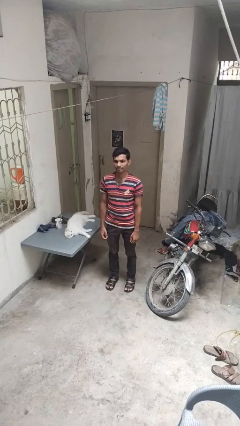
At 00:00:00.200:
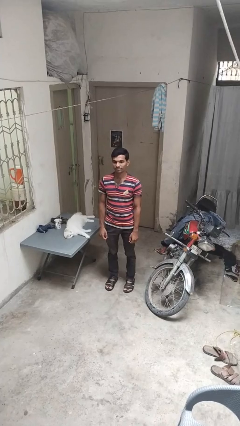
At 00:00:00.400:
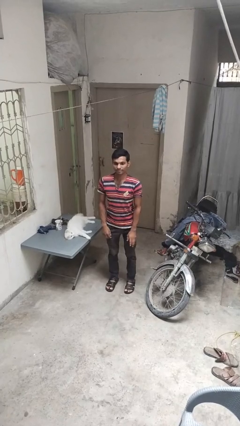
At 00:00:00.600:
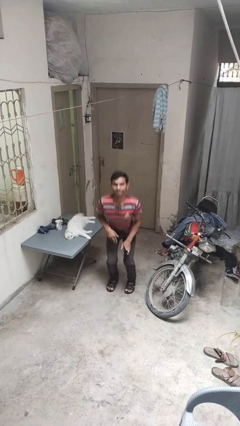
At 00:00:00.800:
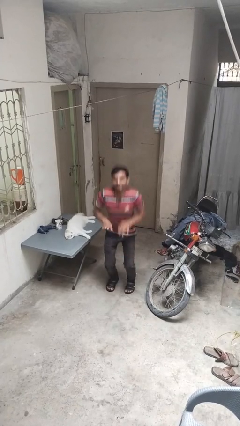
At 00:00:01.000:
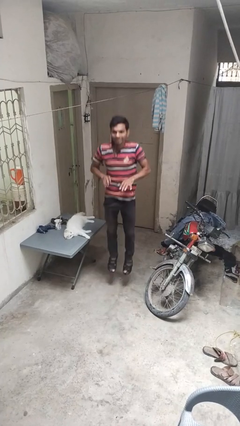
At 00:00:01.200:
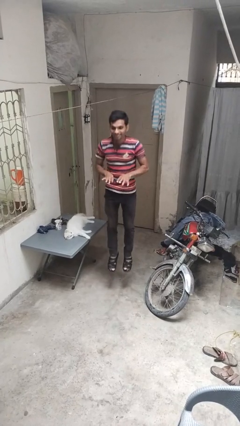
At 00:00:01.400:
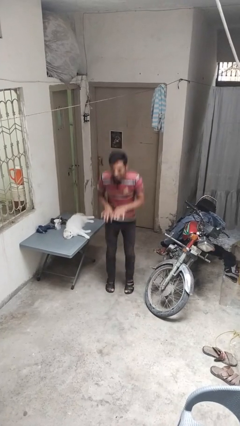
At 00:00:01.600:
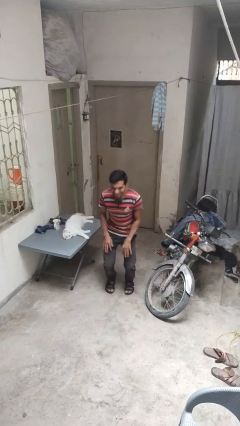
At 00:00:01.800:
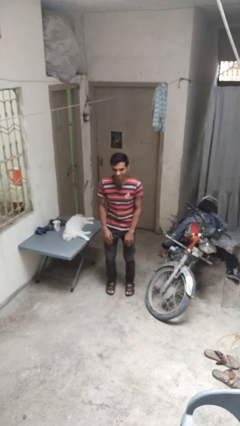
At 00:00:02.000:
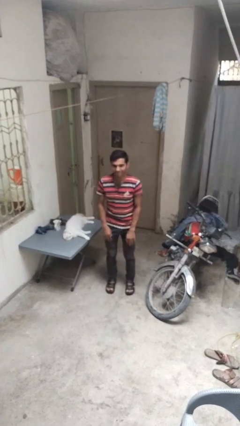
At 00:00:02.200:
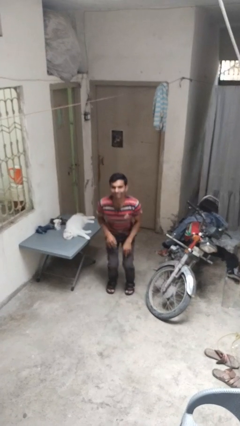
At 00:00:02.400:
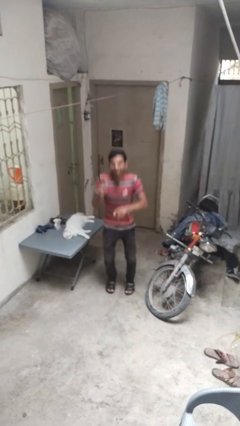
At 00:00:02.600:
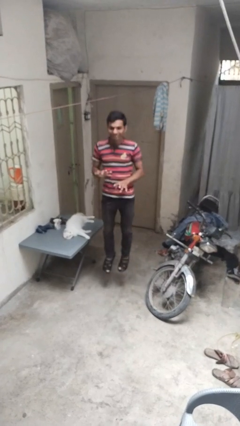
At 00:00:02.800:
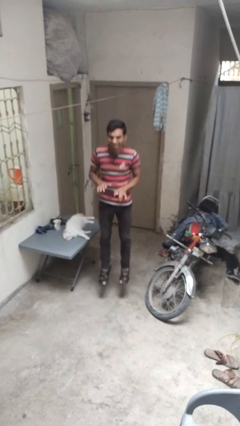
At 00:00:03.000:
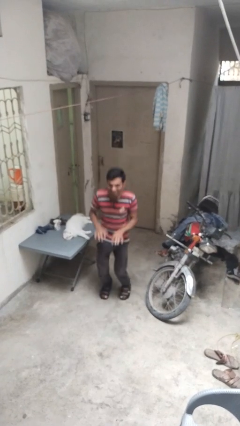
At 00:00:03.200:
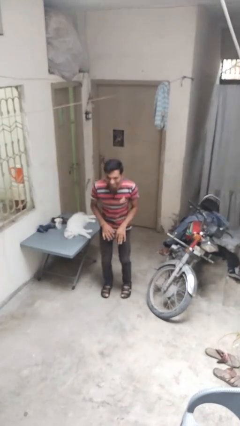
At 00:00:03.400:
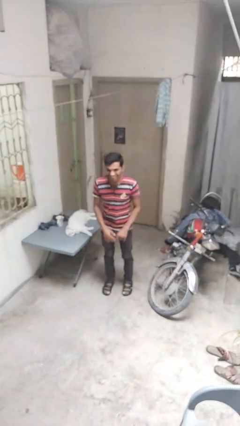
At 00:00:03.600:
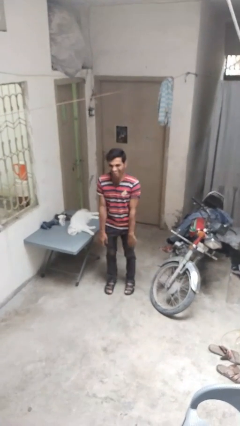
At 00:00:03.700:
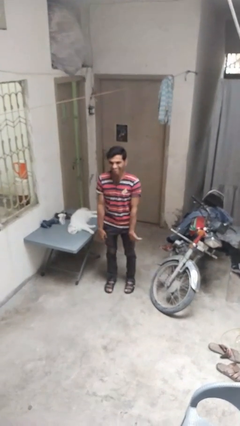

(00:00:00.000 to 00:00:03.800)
person jumps

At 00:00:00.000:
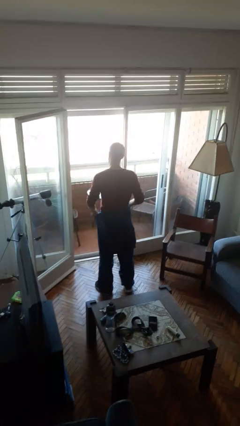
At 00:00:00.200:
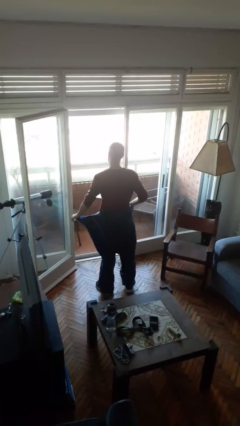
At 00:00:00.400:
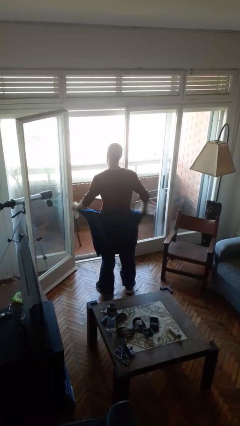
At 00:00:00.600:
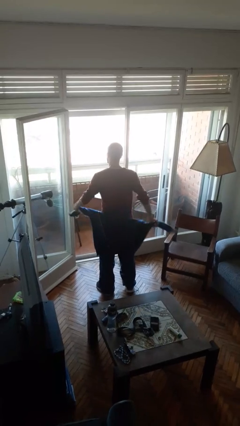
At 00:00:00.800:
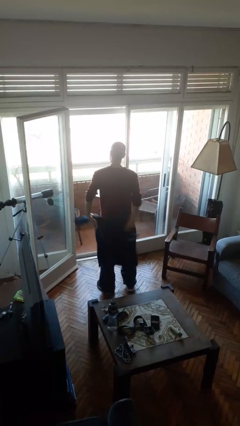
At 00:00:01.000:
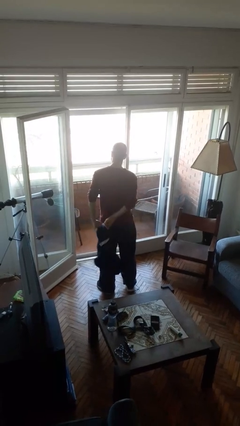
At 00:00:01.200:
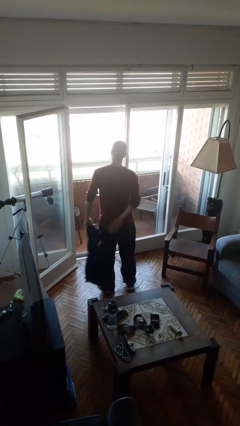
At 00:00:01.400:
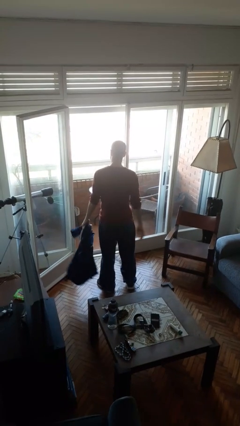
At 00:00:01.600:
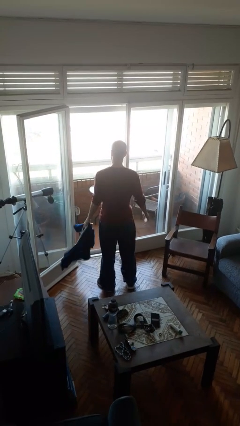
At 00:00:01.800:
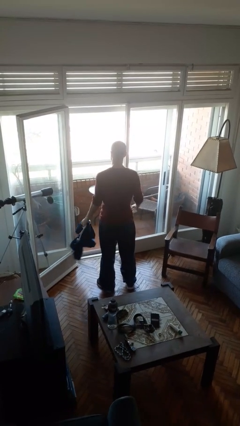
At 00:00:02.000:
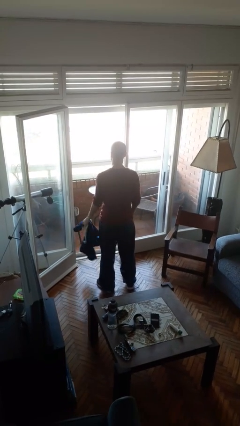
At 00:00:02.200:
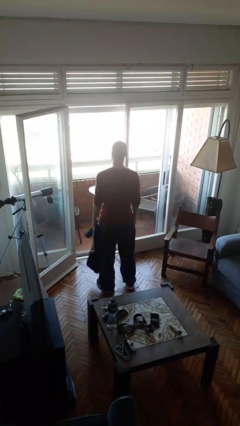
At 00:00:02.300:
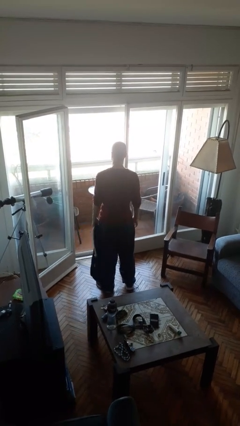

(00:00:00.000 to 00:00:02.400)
person unties jacket around waist

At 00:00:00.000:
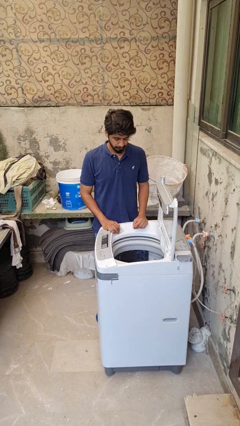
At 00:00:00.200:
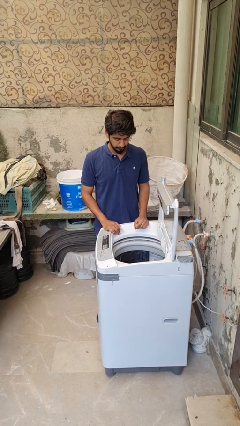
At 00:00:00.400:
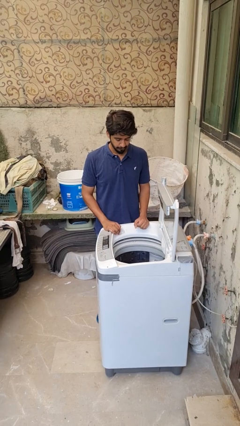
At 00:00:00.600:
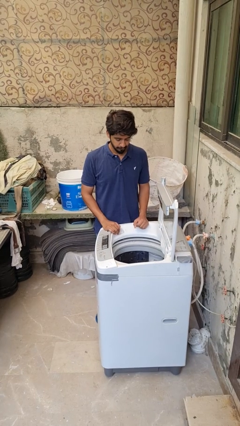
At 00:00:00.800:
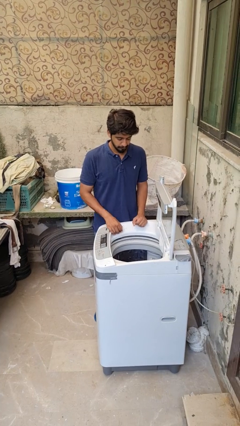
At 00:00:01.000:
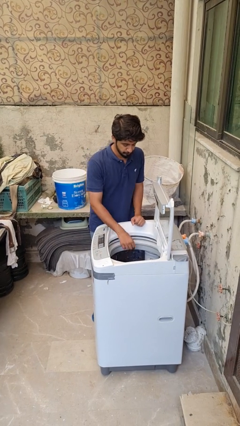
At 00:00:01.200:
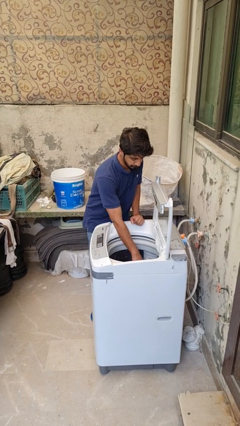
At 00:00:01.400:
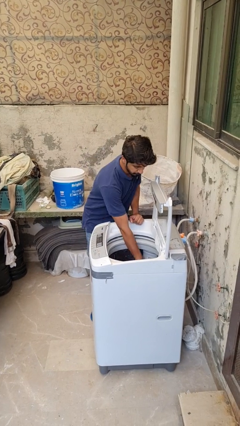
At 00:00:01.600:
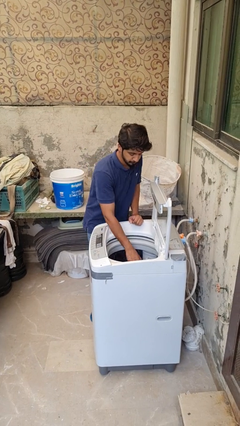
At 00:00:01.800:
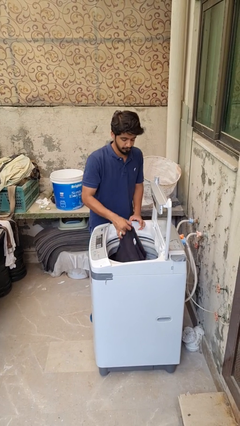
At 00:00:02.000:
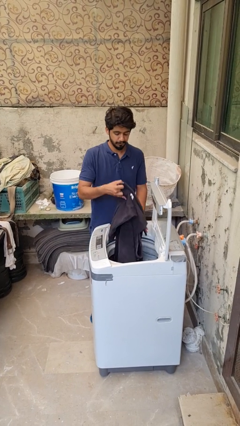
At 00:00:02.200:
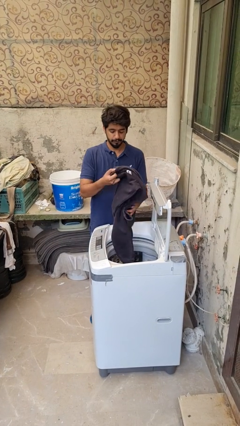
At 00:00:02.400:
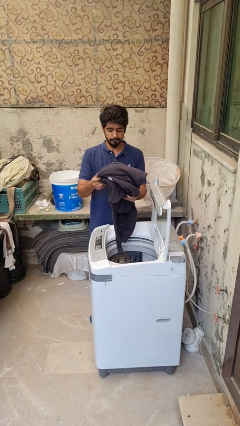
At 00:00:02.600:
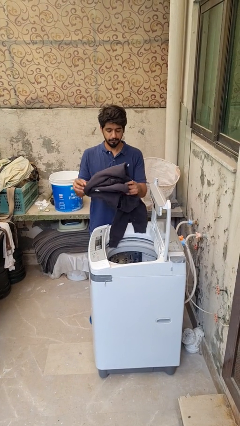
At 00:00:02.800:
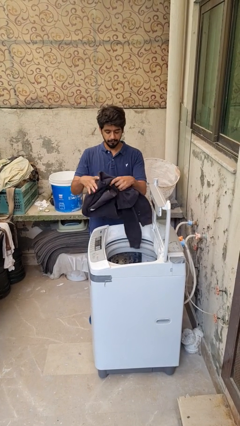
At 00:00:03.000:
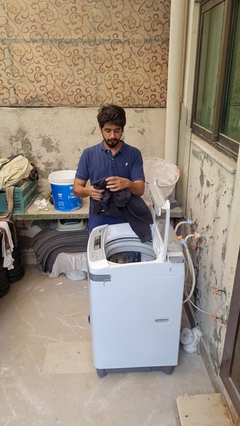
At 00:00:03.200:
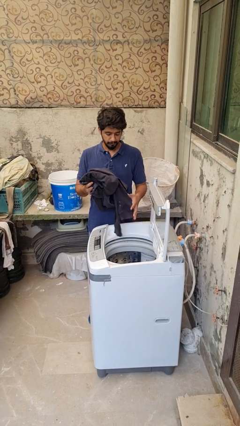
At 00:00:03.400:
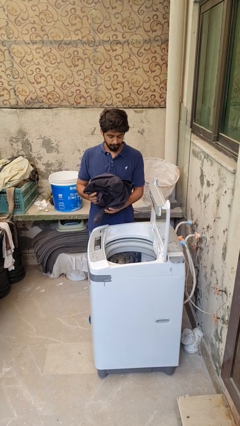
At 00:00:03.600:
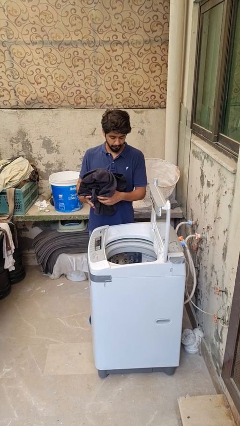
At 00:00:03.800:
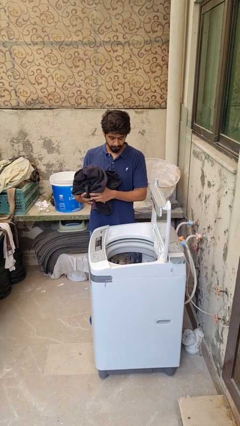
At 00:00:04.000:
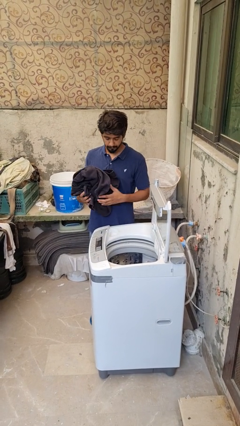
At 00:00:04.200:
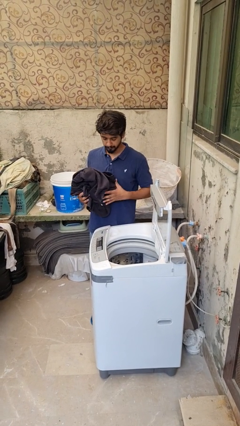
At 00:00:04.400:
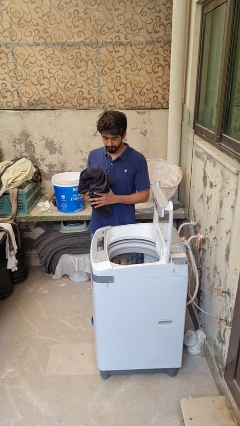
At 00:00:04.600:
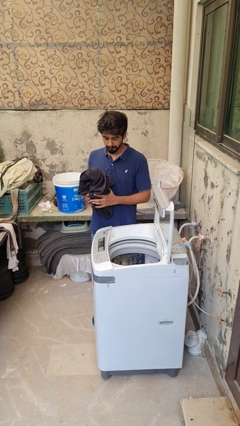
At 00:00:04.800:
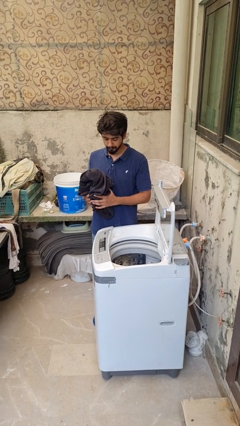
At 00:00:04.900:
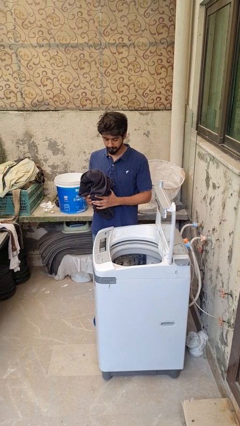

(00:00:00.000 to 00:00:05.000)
person unloads clotheswasher

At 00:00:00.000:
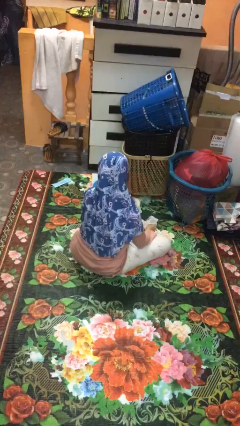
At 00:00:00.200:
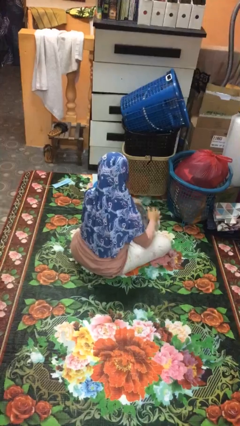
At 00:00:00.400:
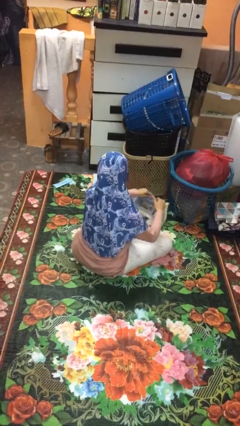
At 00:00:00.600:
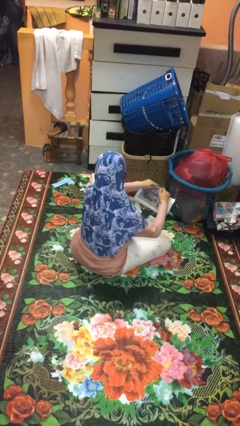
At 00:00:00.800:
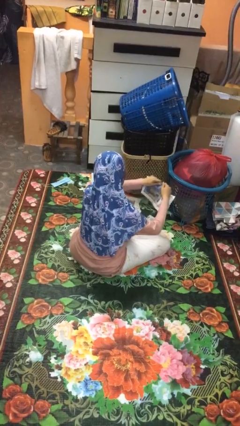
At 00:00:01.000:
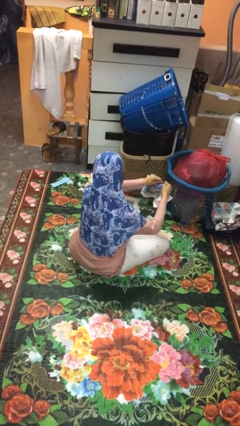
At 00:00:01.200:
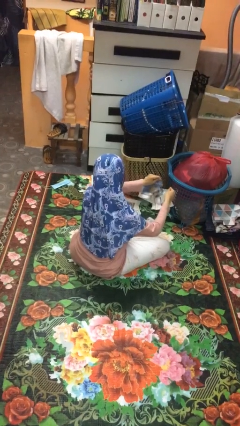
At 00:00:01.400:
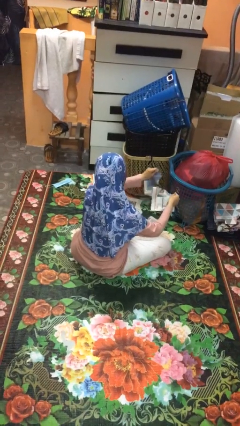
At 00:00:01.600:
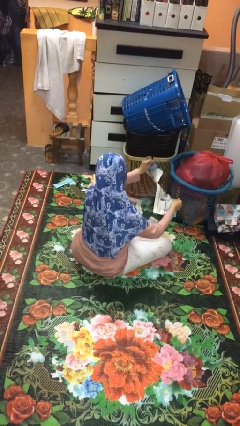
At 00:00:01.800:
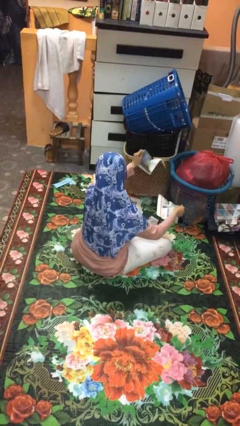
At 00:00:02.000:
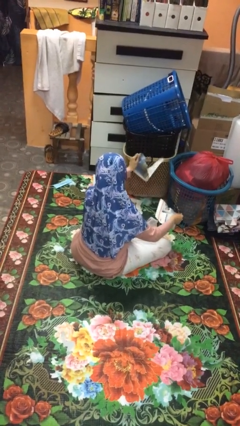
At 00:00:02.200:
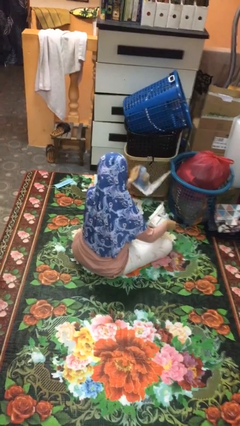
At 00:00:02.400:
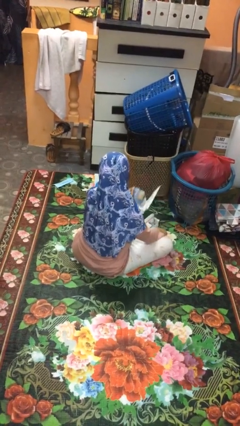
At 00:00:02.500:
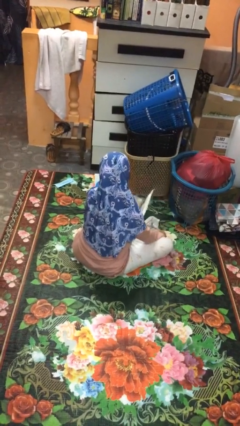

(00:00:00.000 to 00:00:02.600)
person tears paper

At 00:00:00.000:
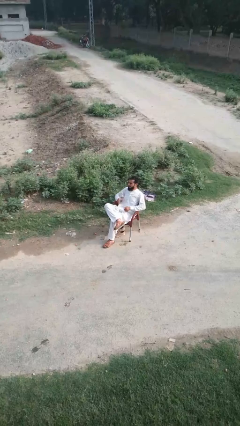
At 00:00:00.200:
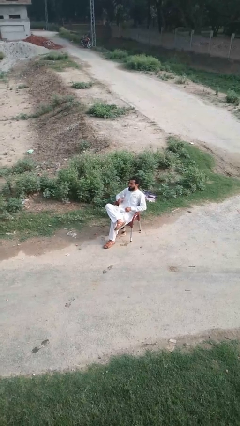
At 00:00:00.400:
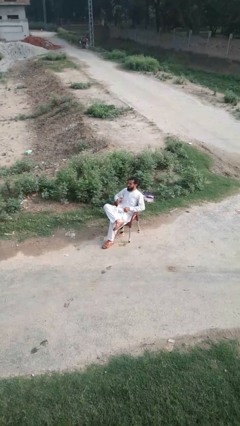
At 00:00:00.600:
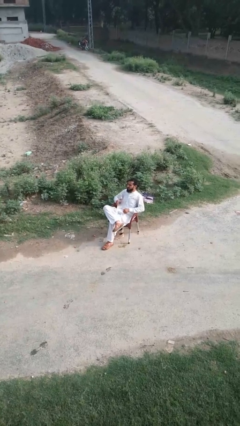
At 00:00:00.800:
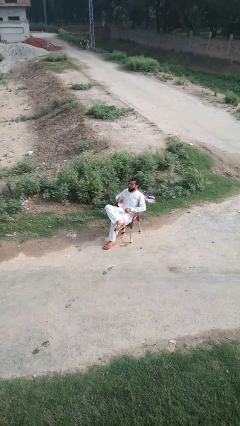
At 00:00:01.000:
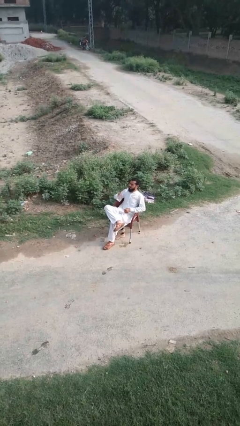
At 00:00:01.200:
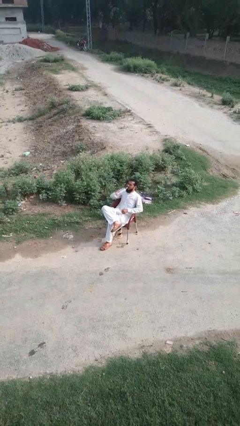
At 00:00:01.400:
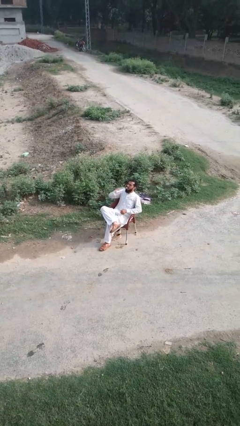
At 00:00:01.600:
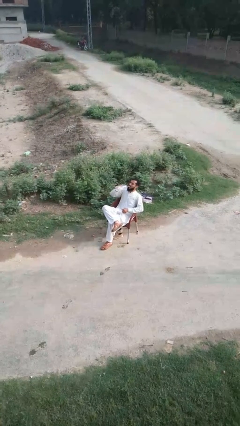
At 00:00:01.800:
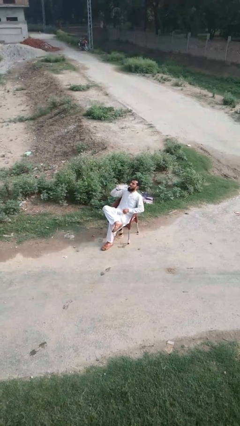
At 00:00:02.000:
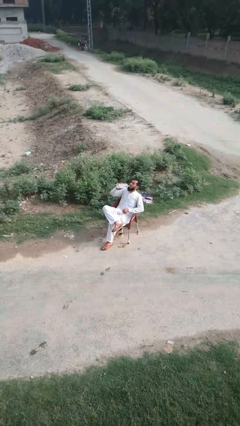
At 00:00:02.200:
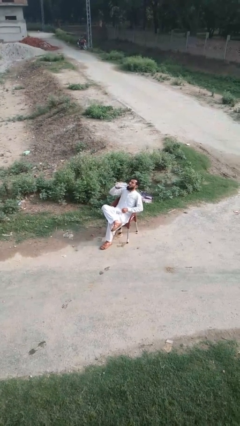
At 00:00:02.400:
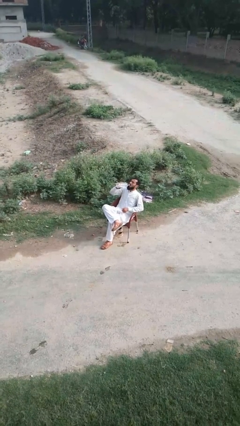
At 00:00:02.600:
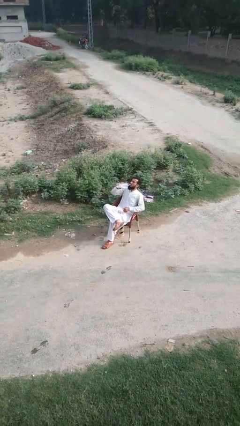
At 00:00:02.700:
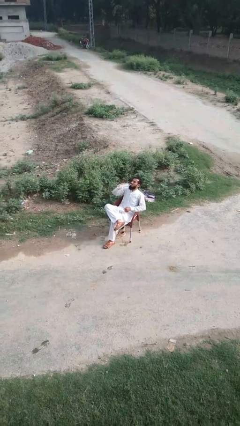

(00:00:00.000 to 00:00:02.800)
person drinks from bottle

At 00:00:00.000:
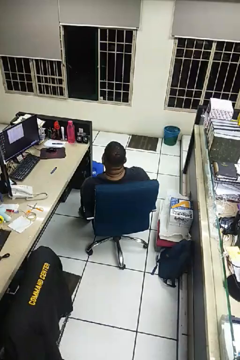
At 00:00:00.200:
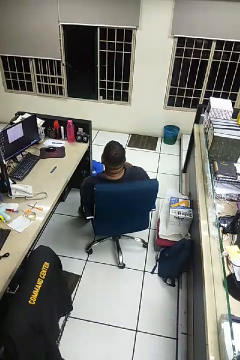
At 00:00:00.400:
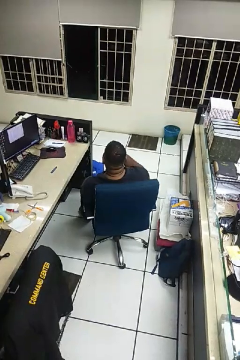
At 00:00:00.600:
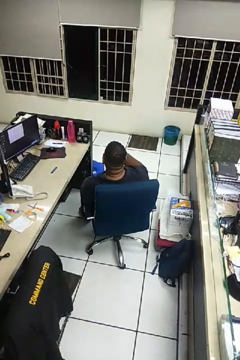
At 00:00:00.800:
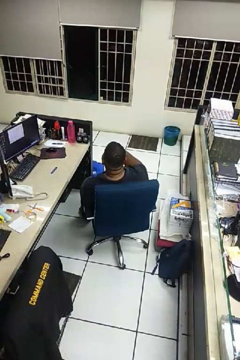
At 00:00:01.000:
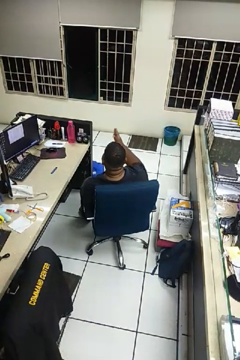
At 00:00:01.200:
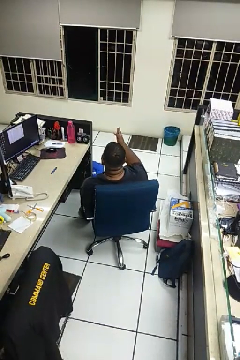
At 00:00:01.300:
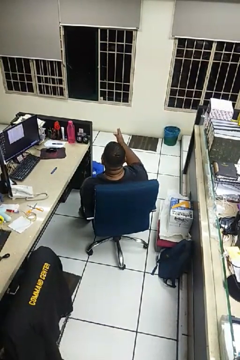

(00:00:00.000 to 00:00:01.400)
person gestures blow kiss
